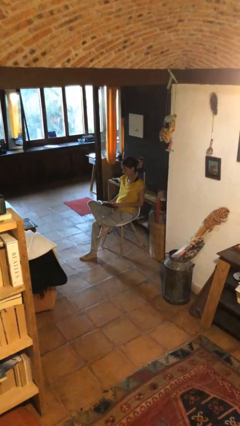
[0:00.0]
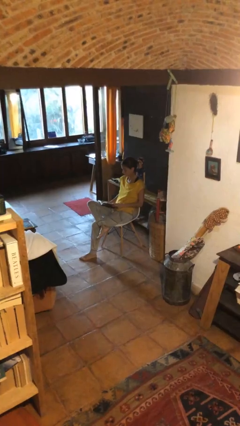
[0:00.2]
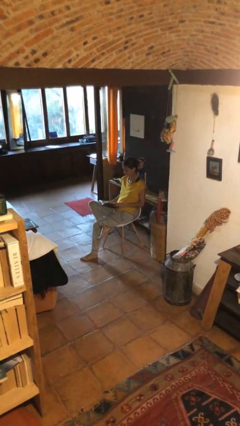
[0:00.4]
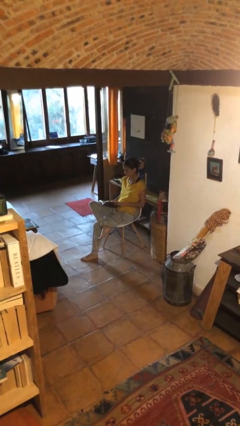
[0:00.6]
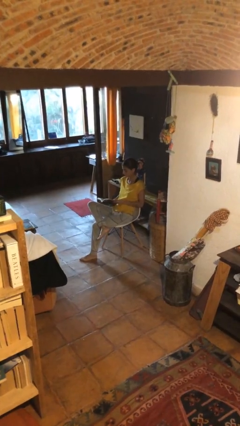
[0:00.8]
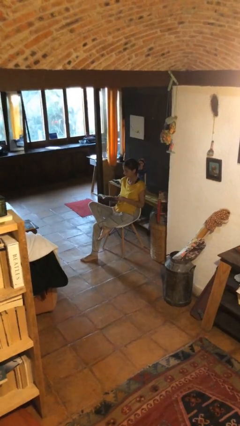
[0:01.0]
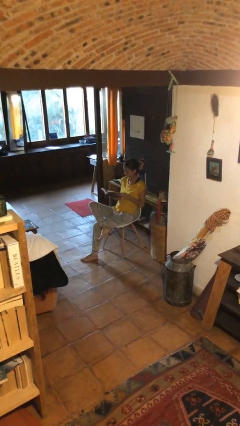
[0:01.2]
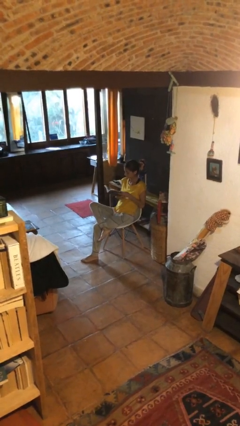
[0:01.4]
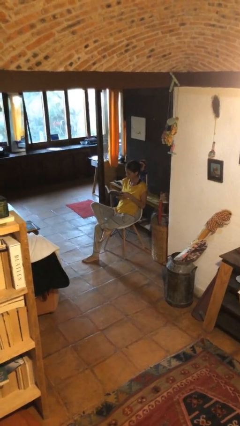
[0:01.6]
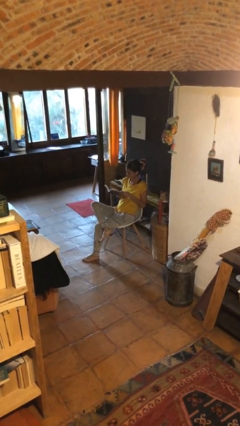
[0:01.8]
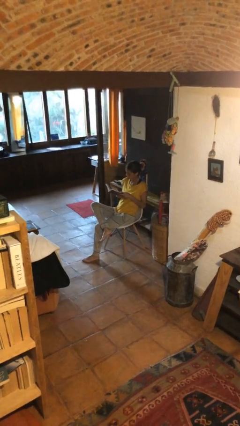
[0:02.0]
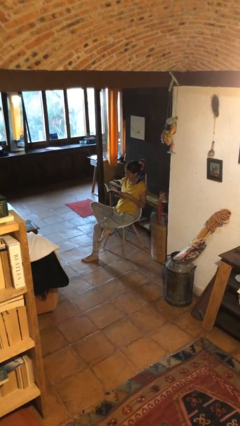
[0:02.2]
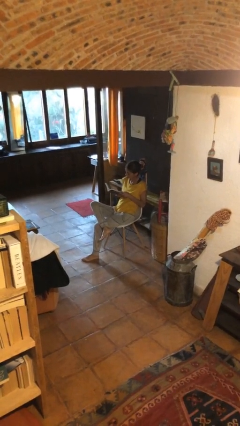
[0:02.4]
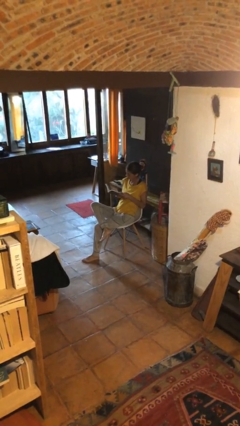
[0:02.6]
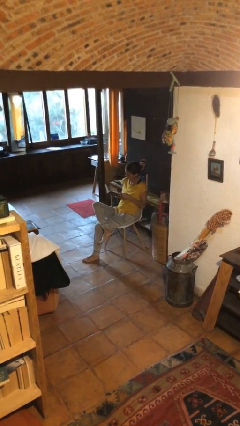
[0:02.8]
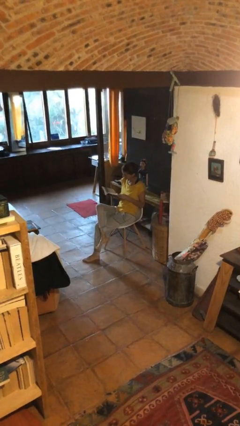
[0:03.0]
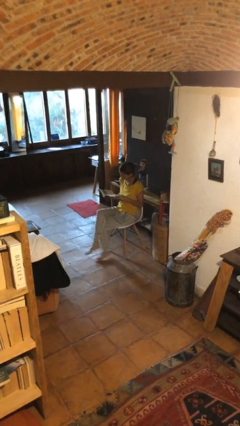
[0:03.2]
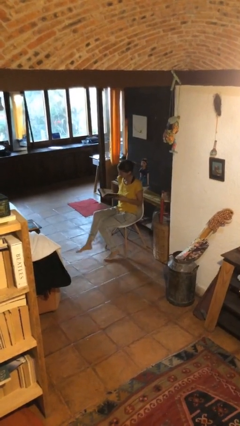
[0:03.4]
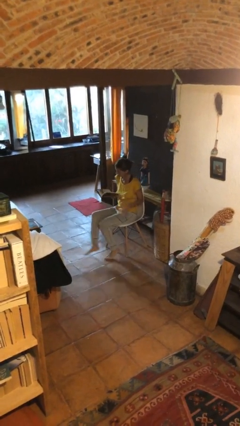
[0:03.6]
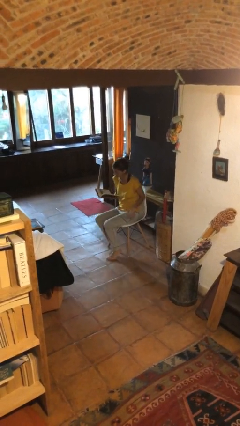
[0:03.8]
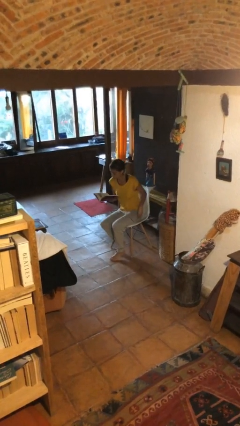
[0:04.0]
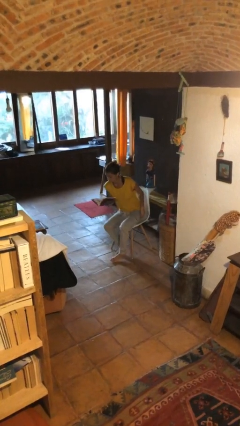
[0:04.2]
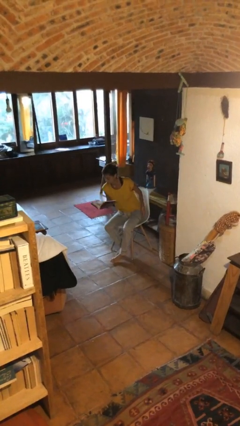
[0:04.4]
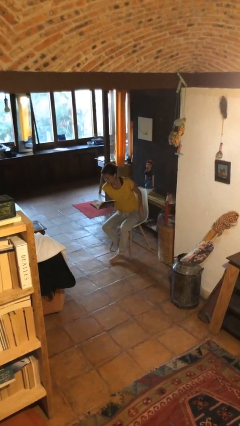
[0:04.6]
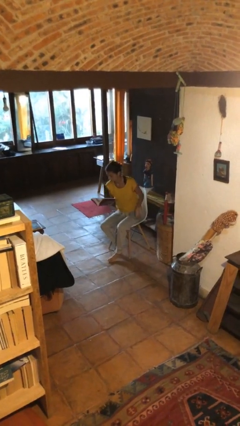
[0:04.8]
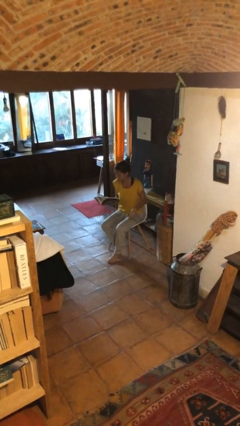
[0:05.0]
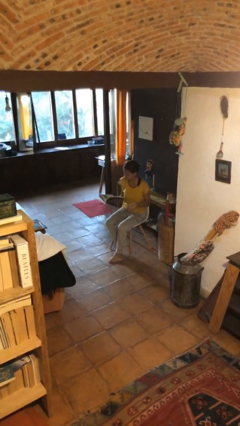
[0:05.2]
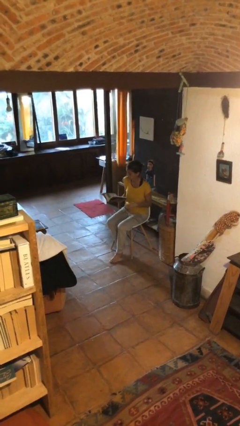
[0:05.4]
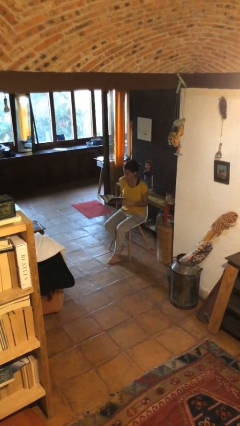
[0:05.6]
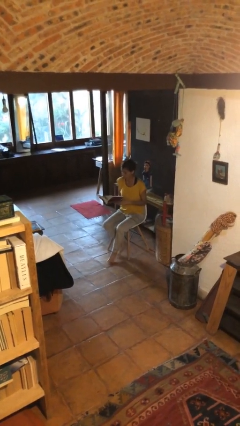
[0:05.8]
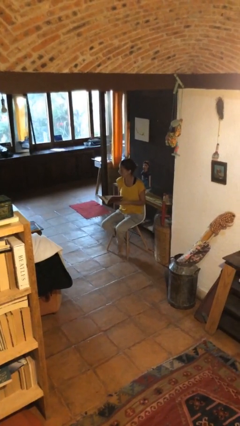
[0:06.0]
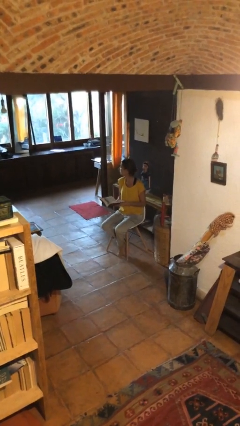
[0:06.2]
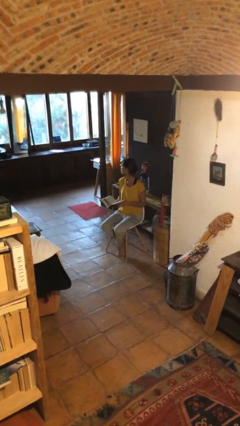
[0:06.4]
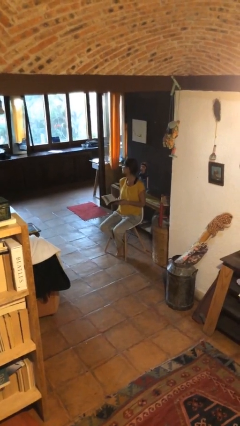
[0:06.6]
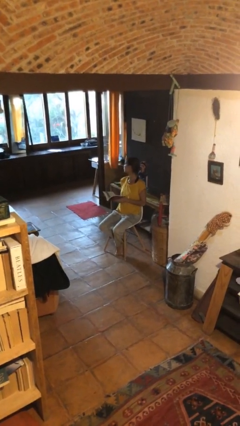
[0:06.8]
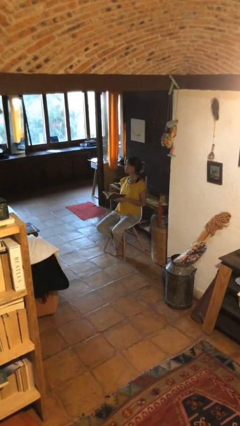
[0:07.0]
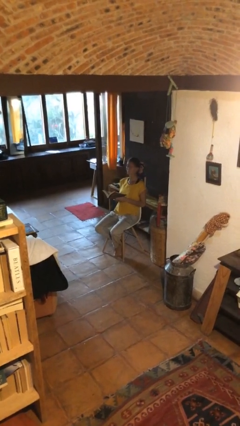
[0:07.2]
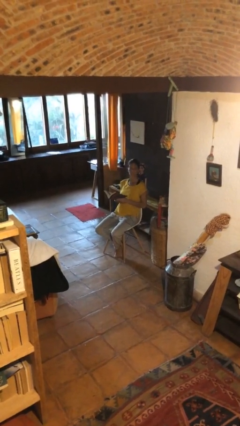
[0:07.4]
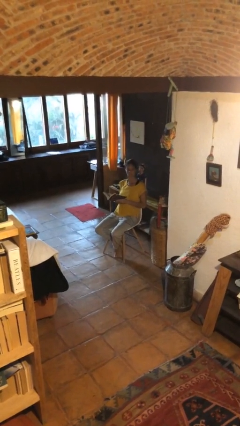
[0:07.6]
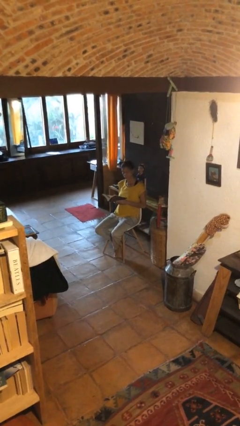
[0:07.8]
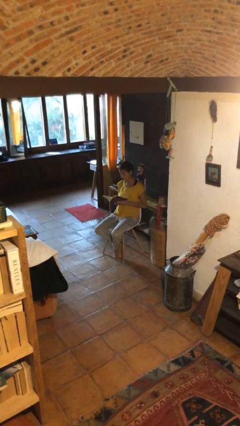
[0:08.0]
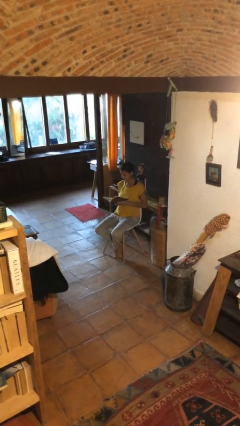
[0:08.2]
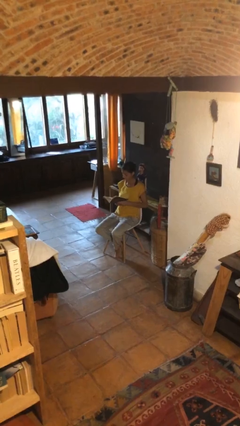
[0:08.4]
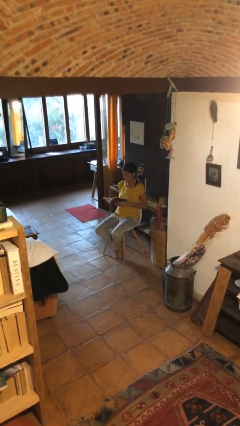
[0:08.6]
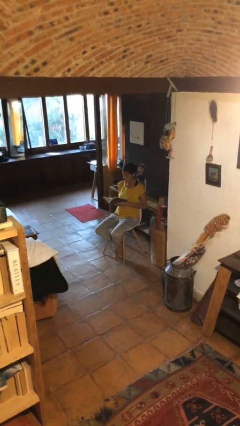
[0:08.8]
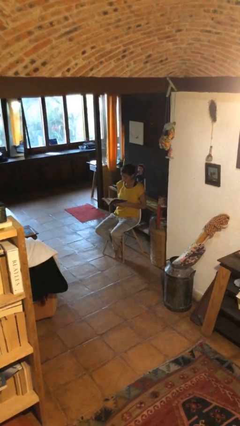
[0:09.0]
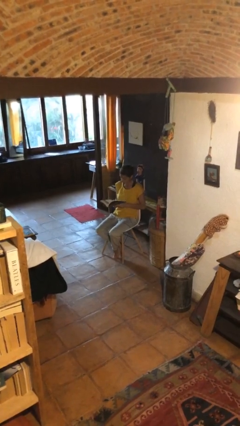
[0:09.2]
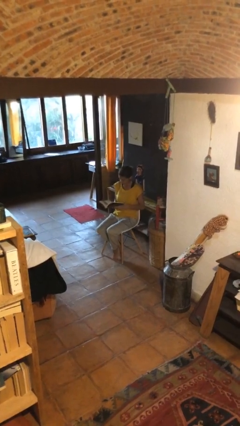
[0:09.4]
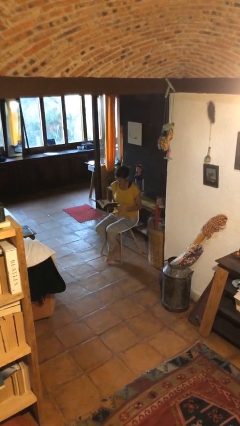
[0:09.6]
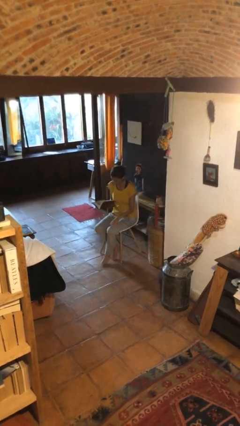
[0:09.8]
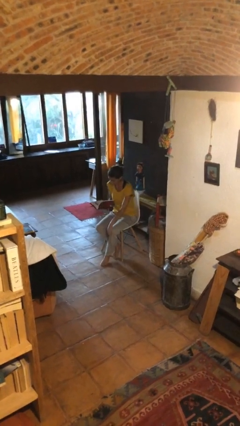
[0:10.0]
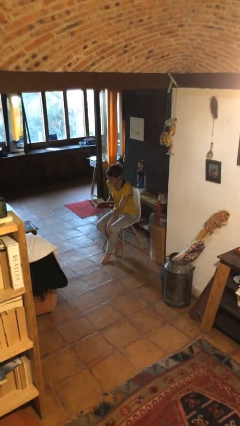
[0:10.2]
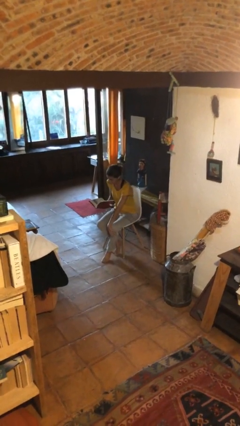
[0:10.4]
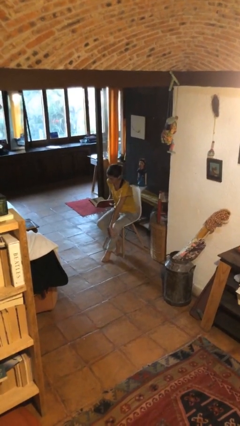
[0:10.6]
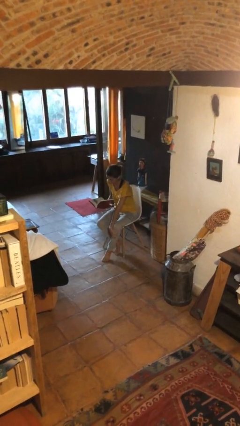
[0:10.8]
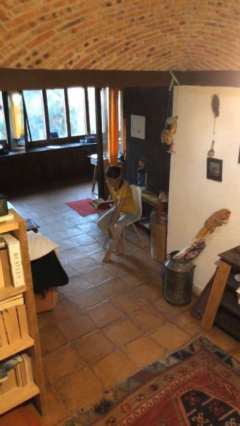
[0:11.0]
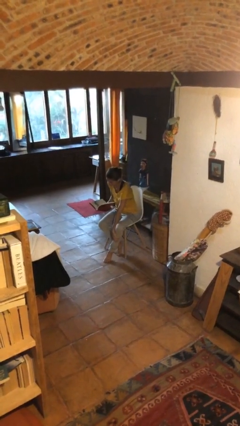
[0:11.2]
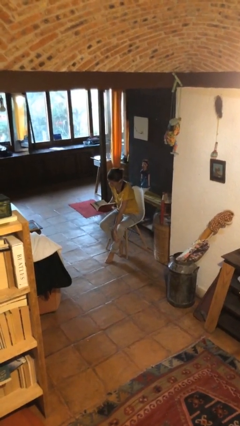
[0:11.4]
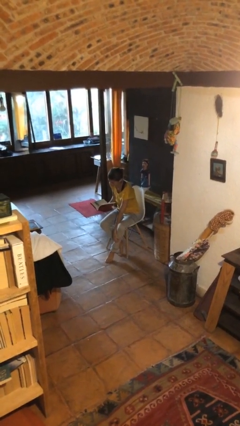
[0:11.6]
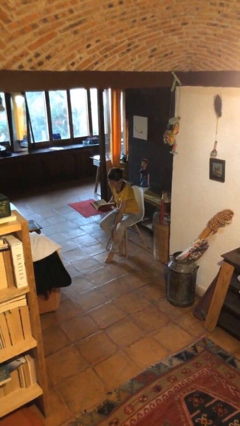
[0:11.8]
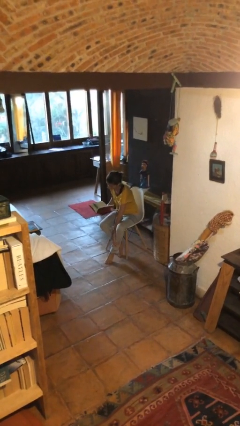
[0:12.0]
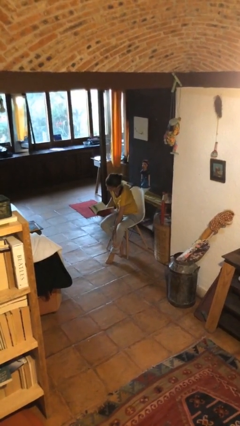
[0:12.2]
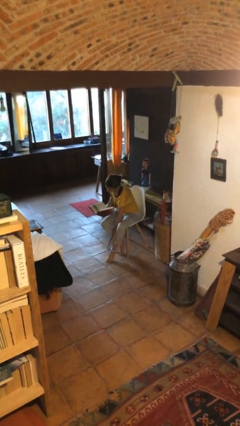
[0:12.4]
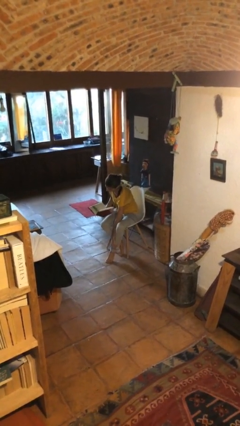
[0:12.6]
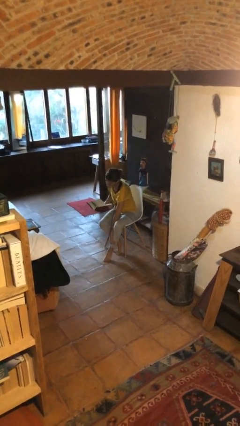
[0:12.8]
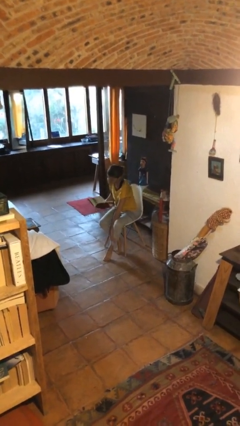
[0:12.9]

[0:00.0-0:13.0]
person reads document

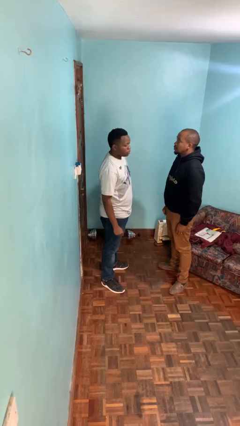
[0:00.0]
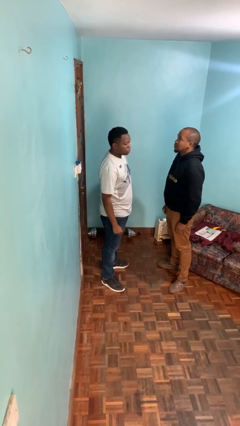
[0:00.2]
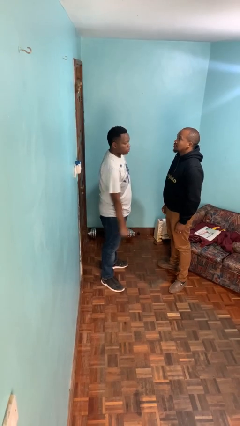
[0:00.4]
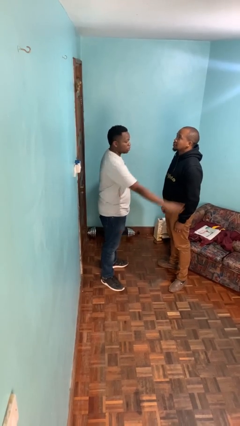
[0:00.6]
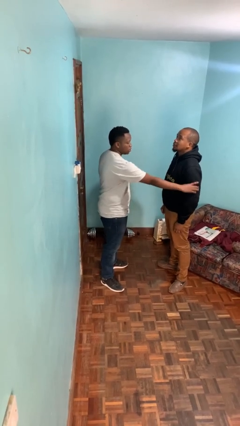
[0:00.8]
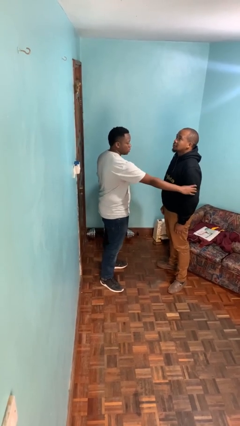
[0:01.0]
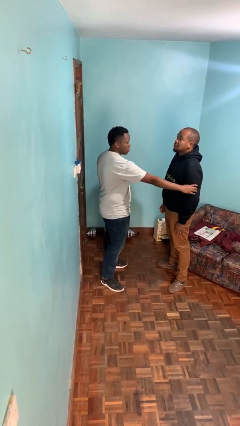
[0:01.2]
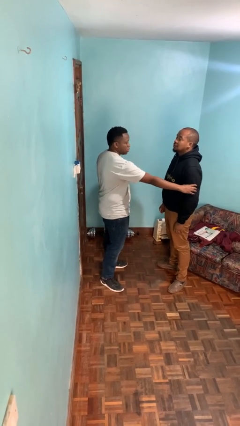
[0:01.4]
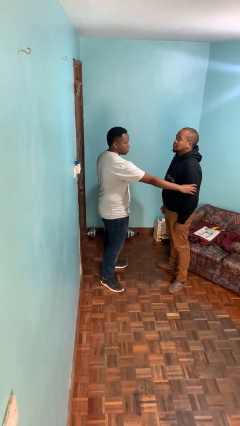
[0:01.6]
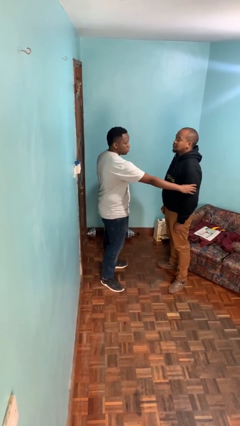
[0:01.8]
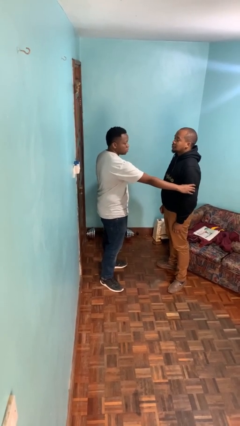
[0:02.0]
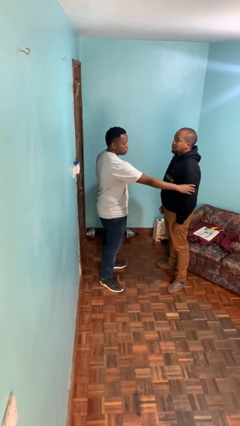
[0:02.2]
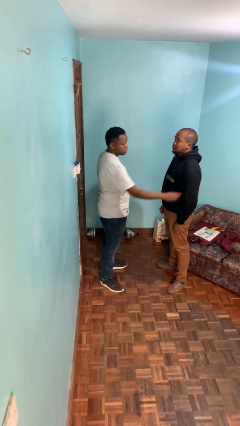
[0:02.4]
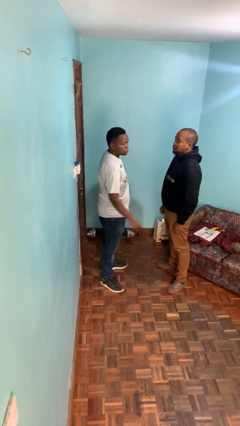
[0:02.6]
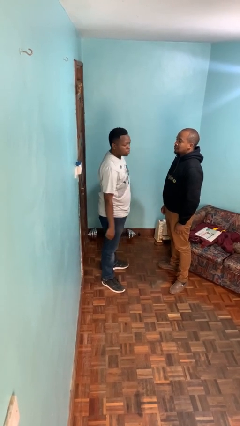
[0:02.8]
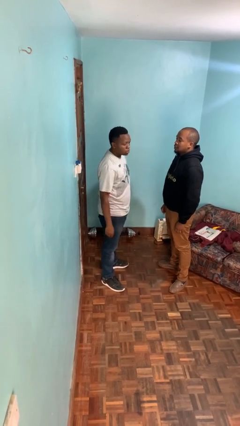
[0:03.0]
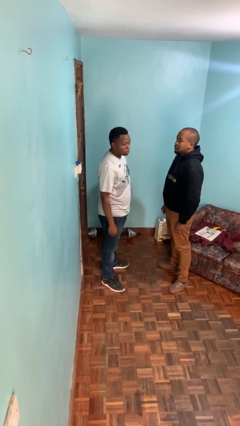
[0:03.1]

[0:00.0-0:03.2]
person grabs person by bicep

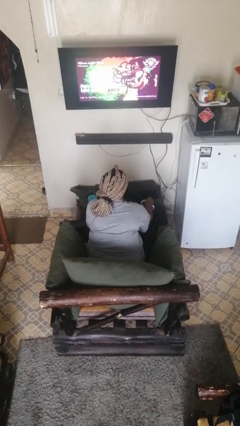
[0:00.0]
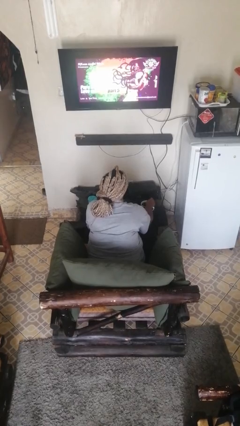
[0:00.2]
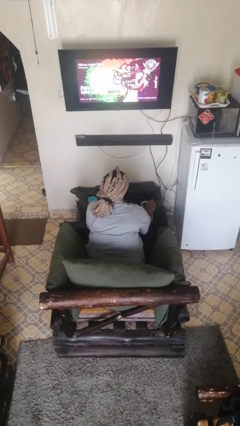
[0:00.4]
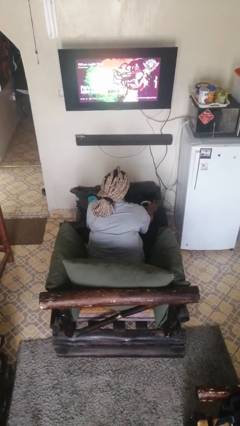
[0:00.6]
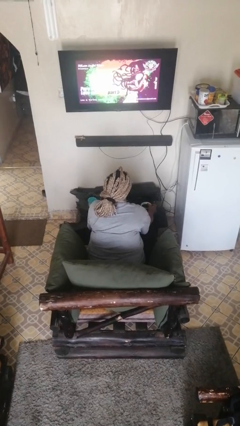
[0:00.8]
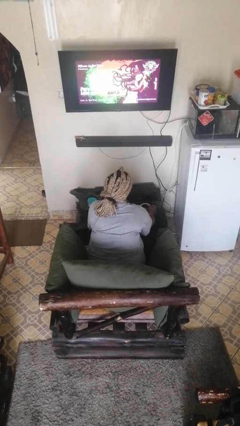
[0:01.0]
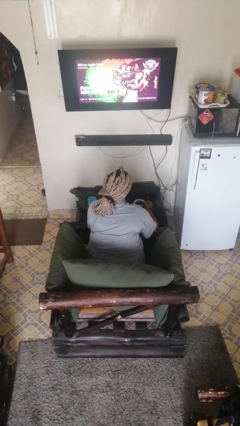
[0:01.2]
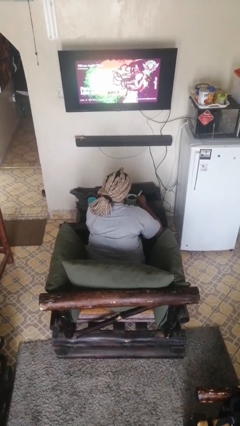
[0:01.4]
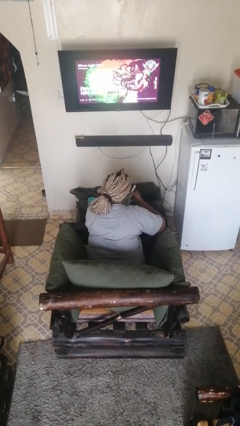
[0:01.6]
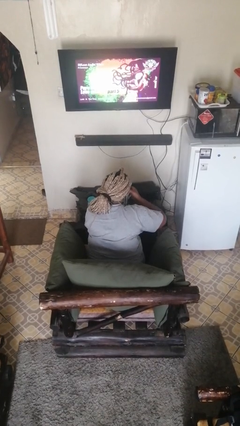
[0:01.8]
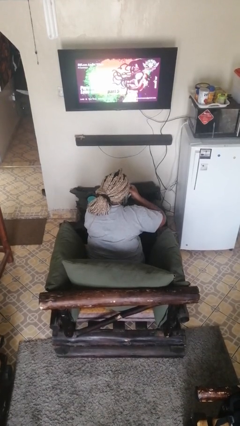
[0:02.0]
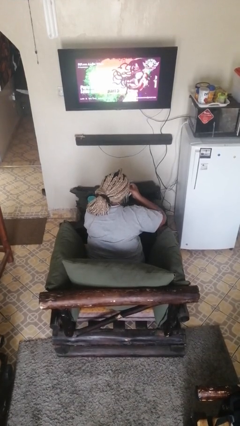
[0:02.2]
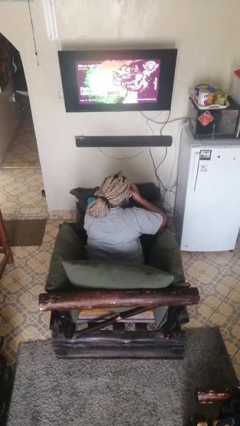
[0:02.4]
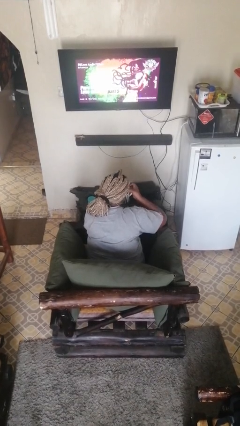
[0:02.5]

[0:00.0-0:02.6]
person drinks from mug
